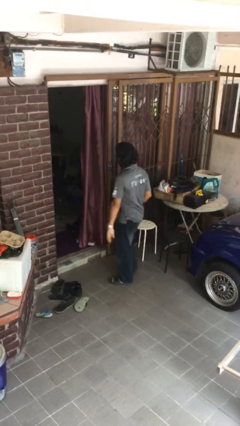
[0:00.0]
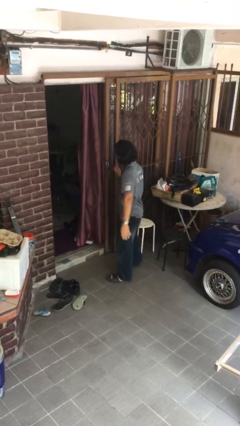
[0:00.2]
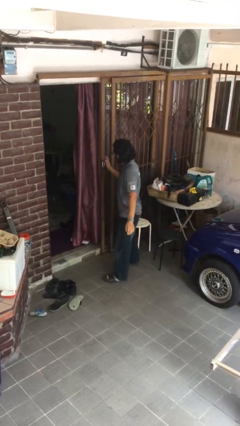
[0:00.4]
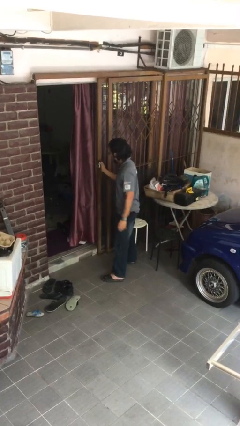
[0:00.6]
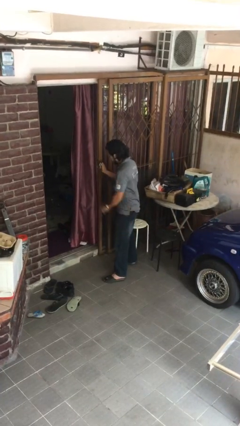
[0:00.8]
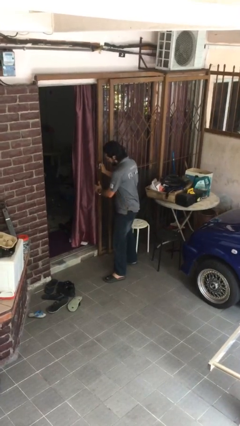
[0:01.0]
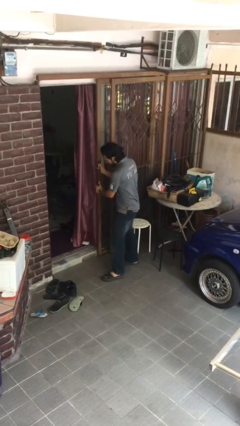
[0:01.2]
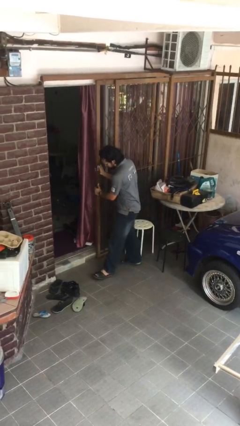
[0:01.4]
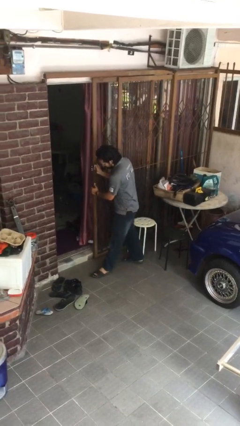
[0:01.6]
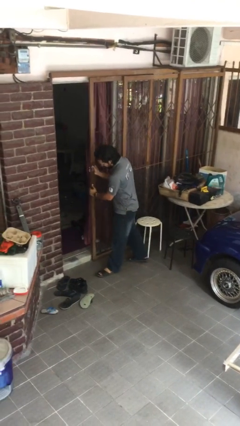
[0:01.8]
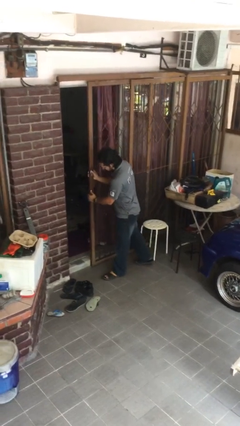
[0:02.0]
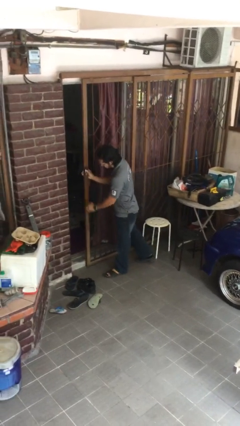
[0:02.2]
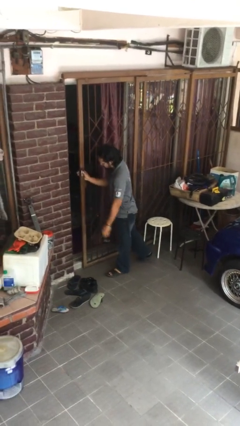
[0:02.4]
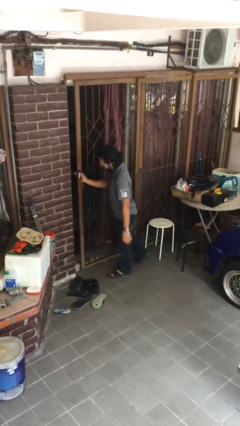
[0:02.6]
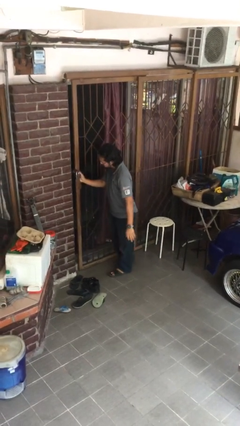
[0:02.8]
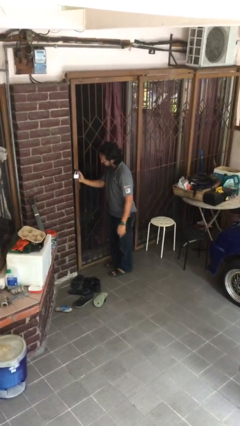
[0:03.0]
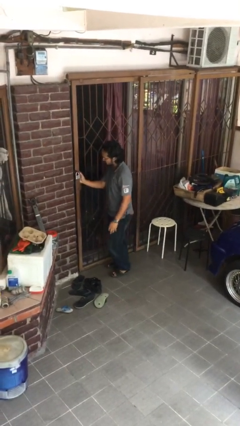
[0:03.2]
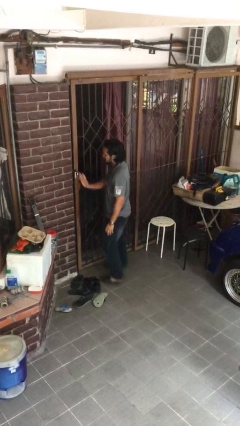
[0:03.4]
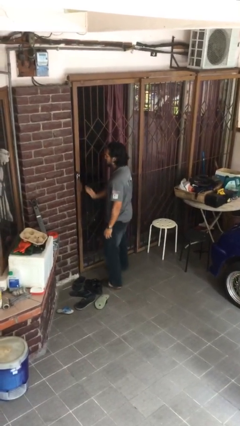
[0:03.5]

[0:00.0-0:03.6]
person closes facility door

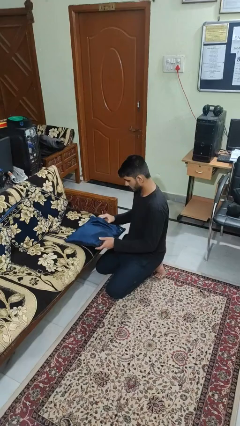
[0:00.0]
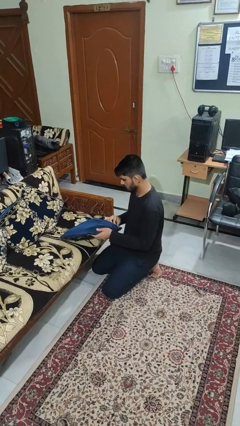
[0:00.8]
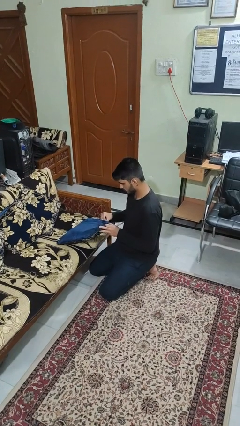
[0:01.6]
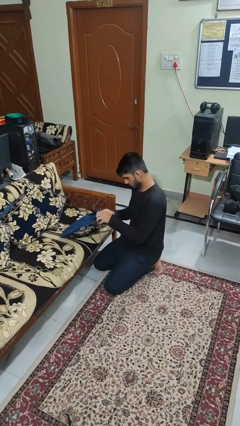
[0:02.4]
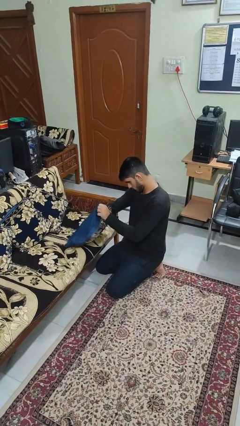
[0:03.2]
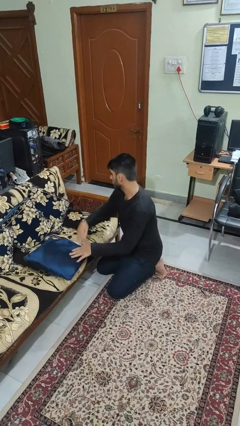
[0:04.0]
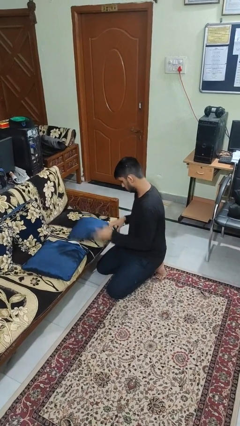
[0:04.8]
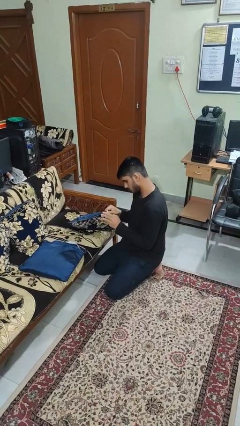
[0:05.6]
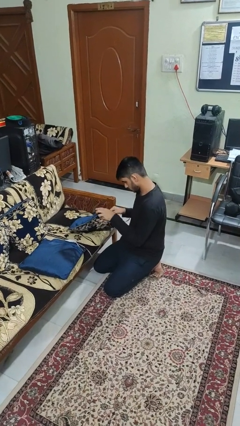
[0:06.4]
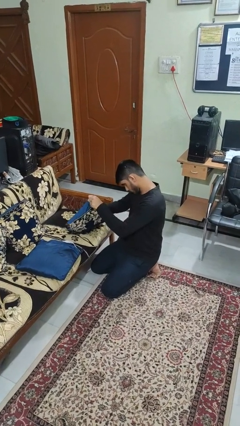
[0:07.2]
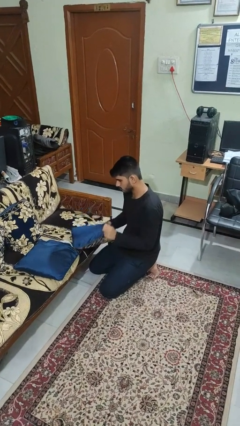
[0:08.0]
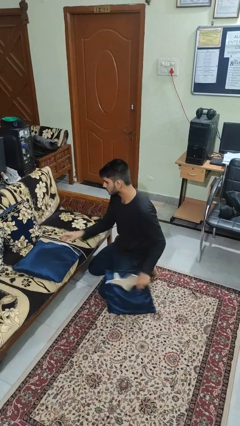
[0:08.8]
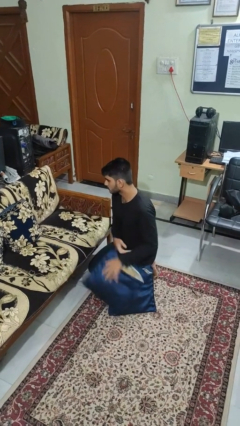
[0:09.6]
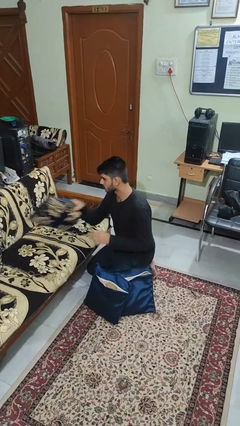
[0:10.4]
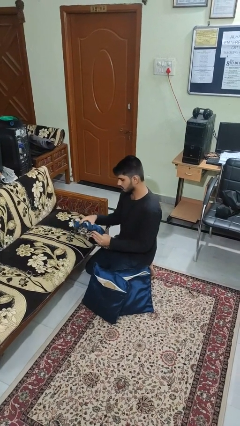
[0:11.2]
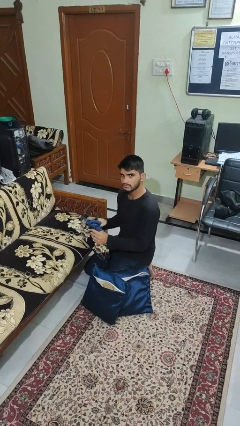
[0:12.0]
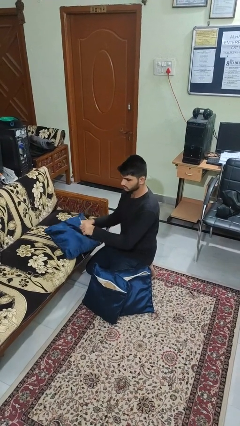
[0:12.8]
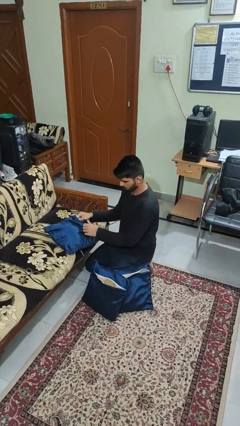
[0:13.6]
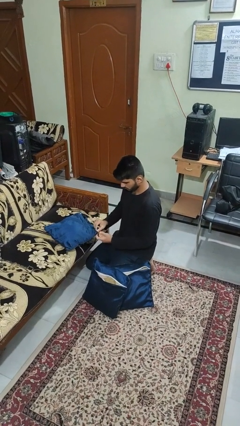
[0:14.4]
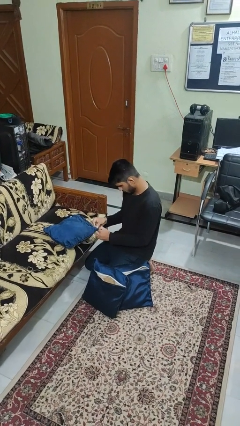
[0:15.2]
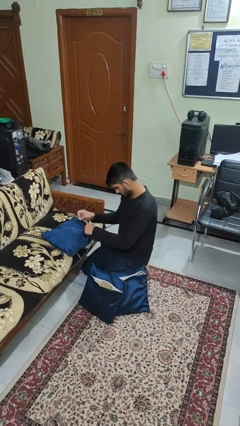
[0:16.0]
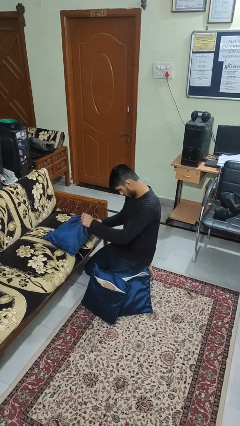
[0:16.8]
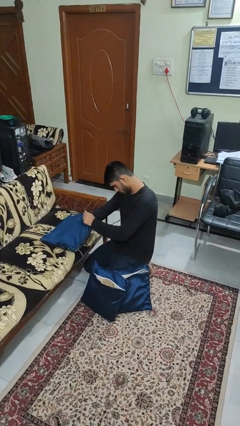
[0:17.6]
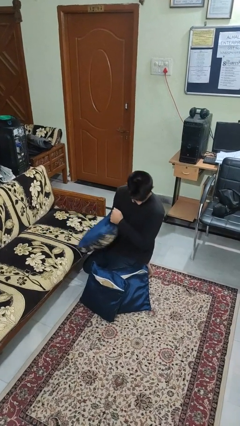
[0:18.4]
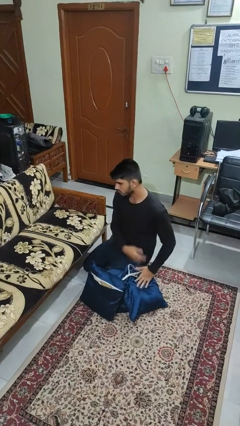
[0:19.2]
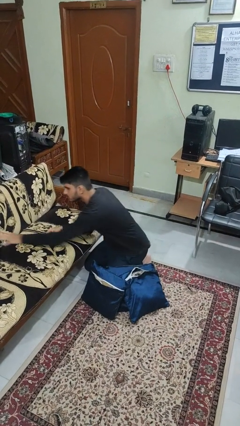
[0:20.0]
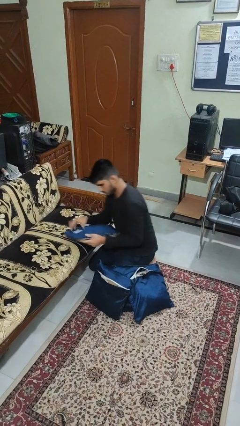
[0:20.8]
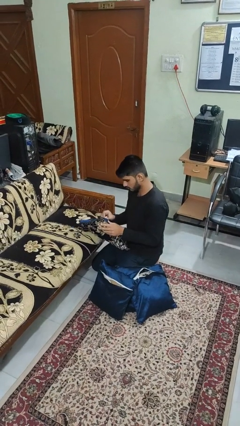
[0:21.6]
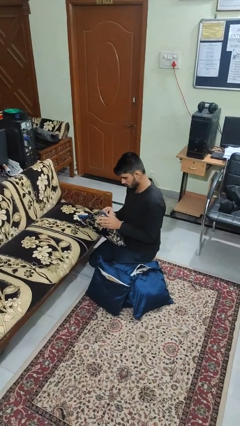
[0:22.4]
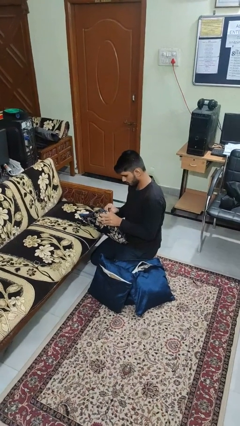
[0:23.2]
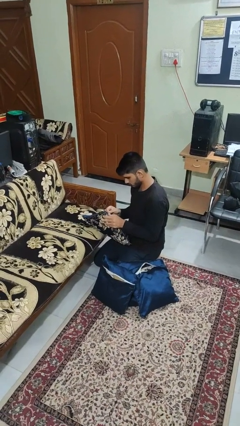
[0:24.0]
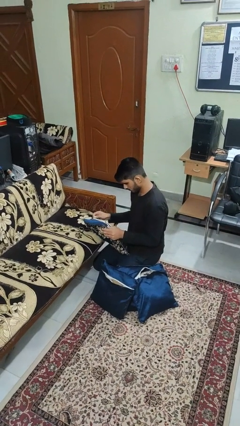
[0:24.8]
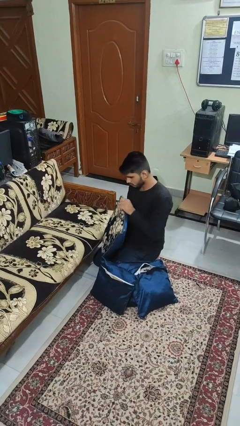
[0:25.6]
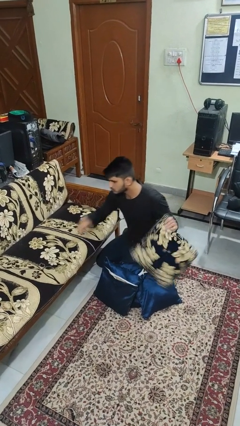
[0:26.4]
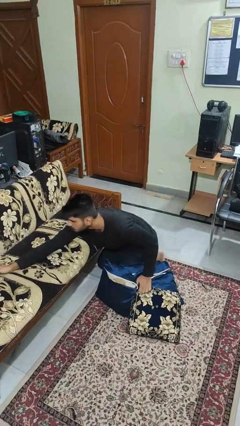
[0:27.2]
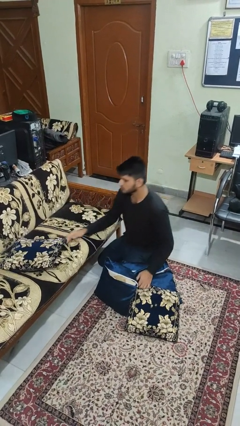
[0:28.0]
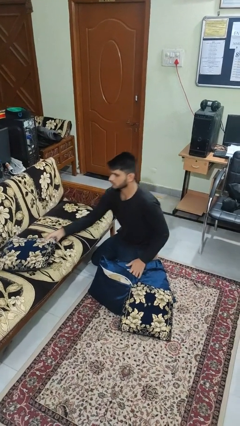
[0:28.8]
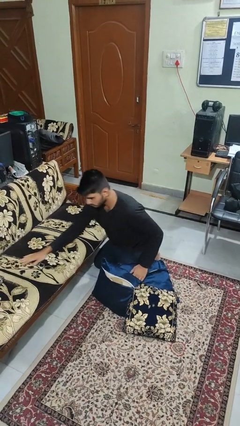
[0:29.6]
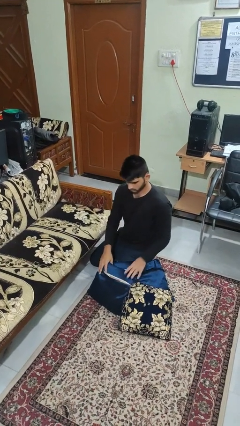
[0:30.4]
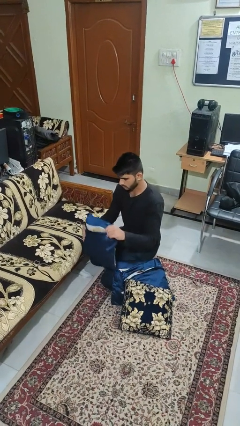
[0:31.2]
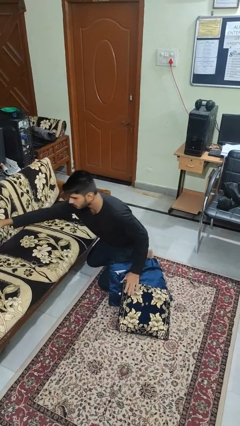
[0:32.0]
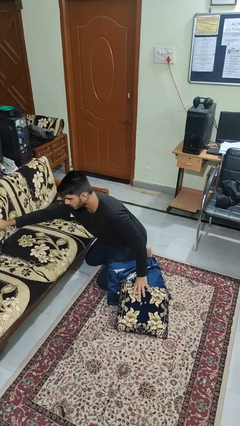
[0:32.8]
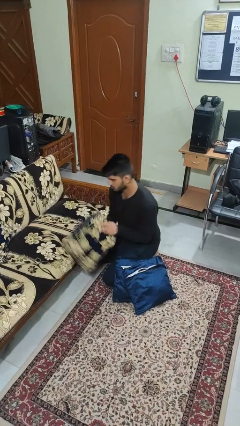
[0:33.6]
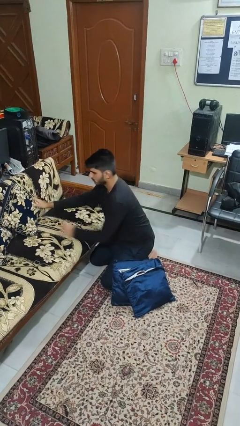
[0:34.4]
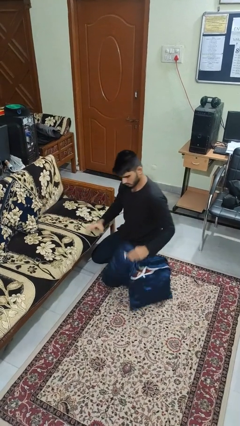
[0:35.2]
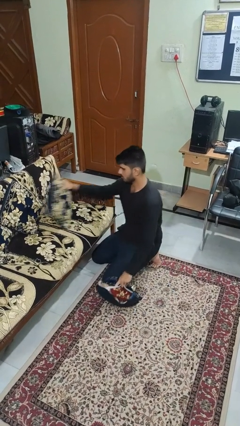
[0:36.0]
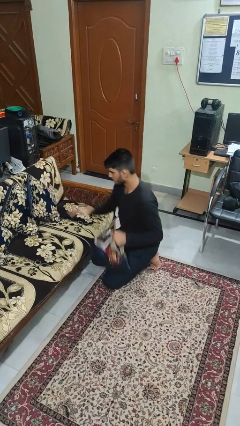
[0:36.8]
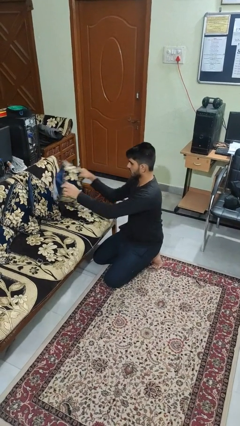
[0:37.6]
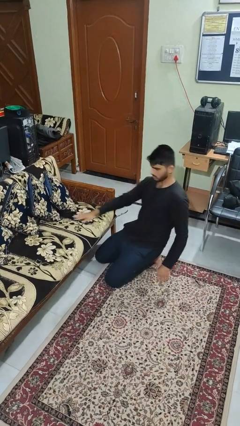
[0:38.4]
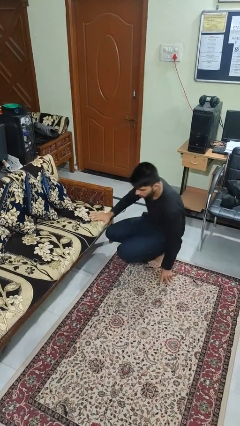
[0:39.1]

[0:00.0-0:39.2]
person searches in couch

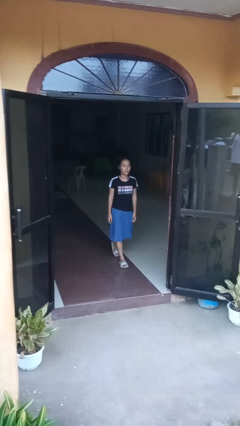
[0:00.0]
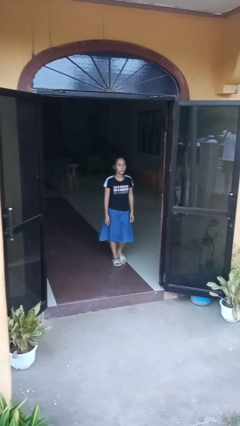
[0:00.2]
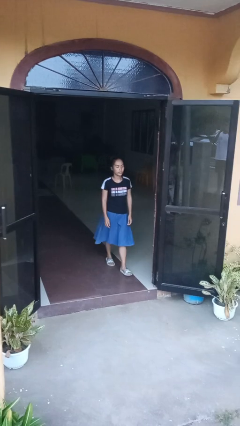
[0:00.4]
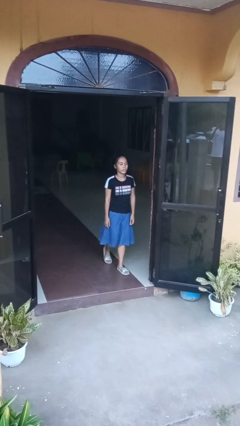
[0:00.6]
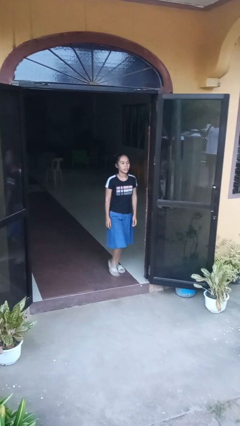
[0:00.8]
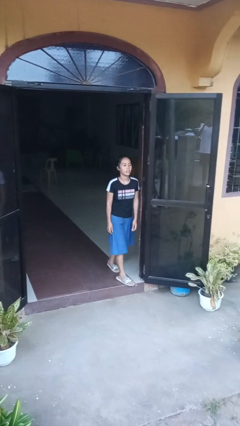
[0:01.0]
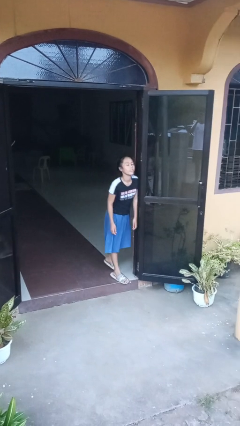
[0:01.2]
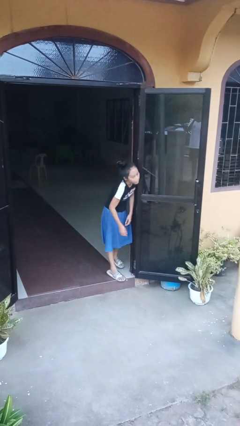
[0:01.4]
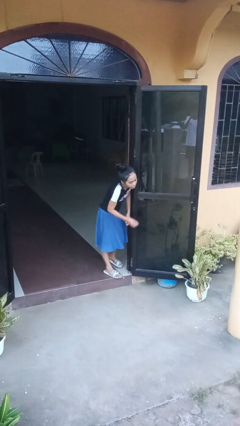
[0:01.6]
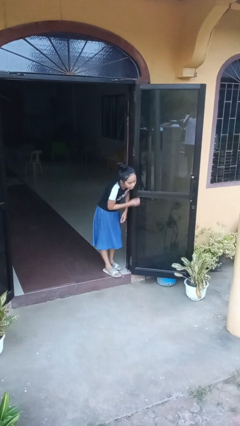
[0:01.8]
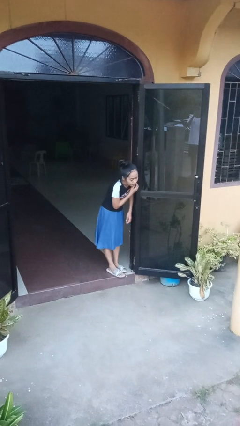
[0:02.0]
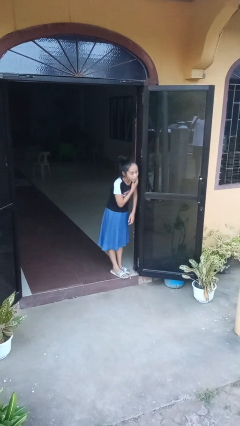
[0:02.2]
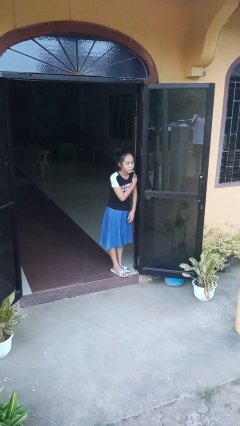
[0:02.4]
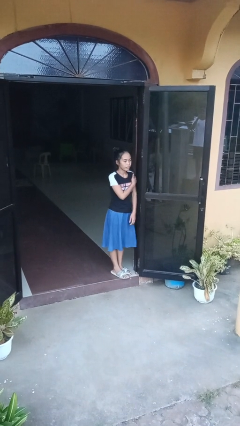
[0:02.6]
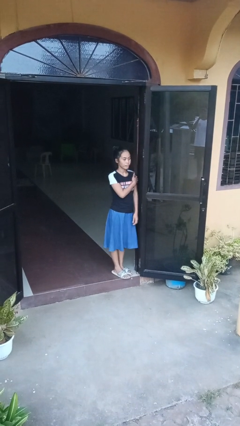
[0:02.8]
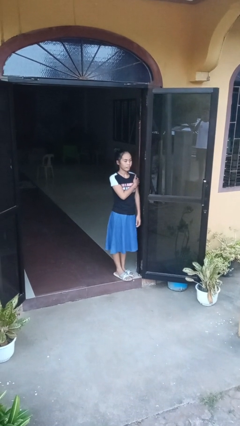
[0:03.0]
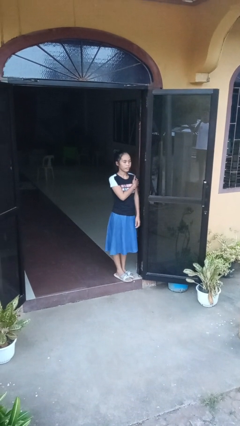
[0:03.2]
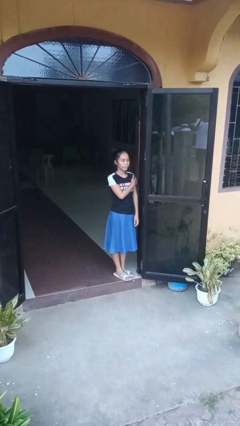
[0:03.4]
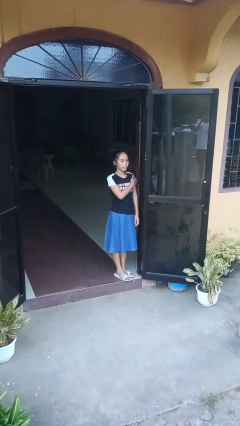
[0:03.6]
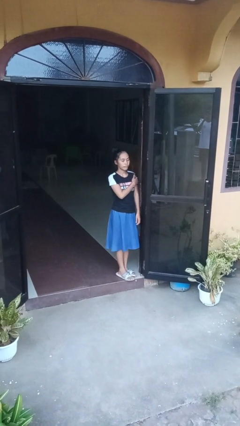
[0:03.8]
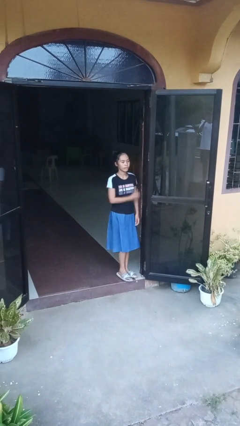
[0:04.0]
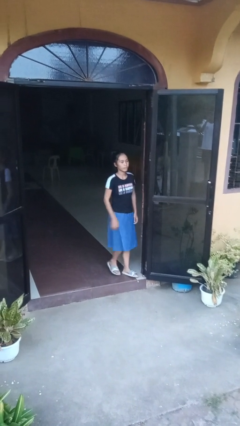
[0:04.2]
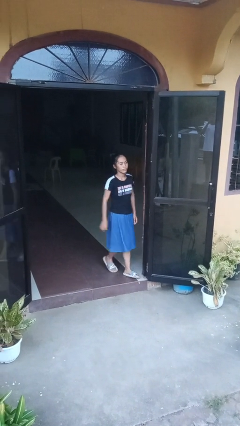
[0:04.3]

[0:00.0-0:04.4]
person bumps into wall

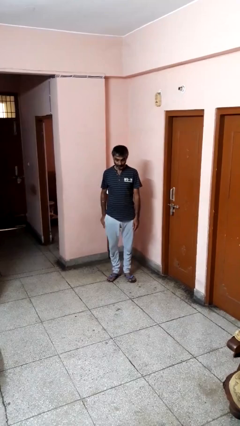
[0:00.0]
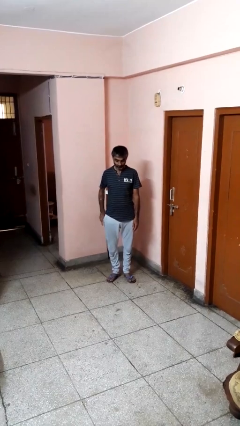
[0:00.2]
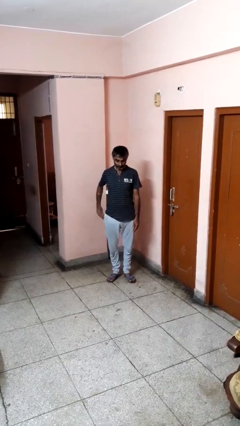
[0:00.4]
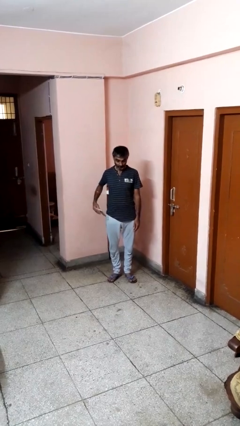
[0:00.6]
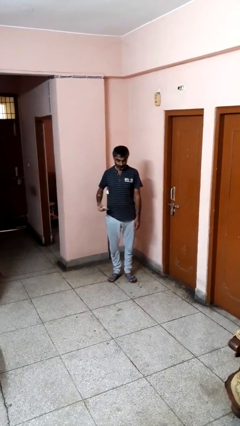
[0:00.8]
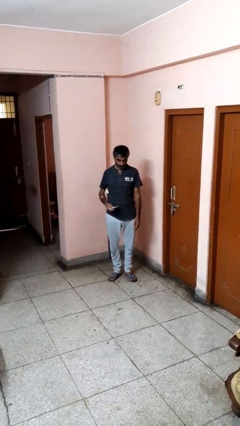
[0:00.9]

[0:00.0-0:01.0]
person takes phone from pocket
